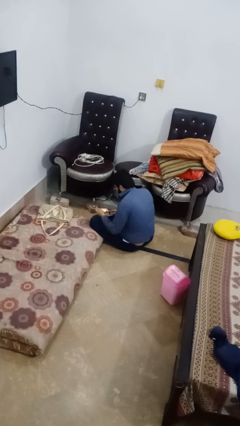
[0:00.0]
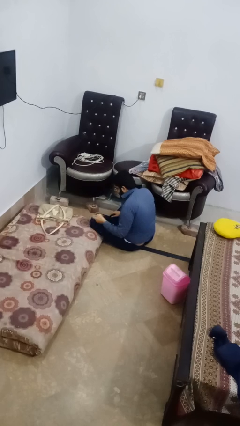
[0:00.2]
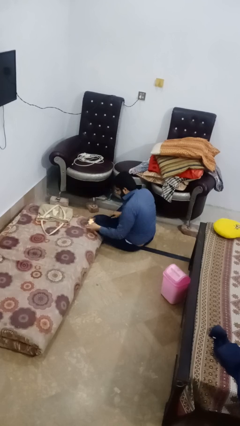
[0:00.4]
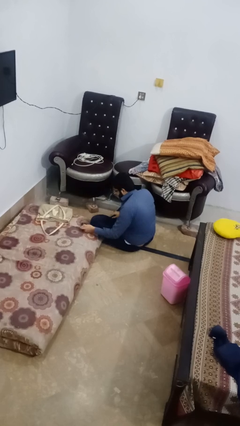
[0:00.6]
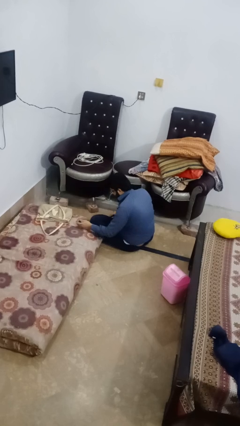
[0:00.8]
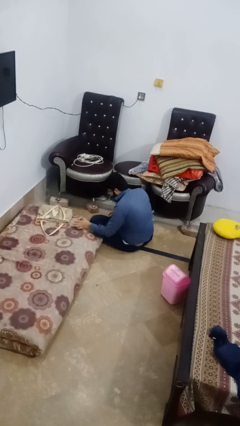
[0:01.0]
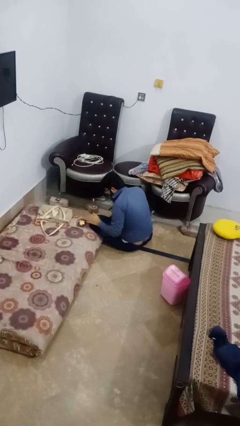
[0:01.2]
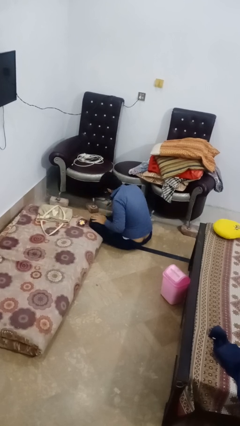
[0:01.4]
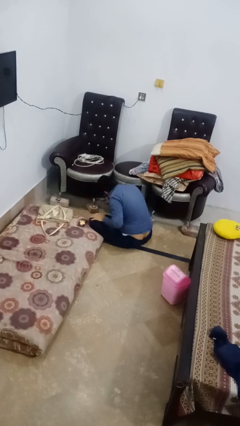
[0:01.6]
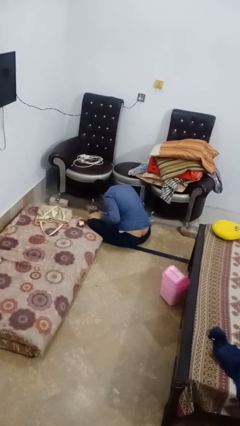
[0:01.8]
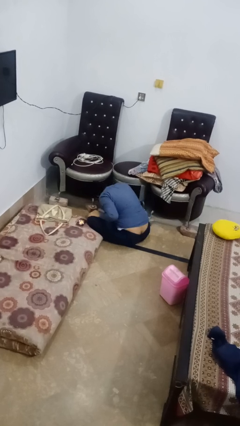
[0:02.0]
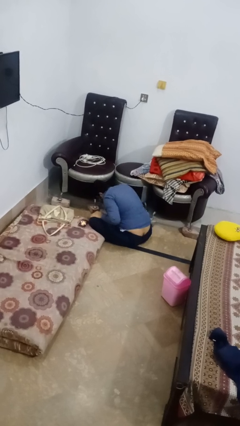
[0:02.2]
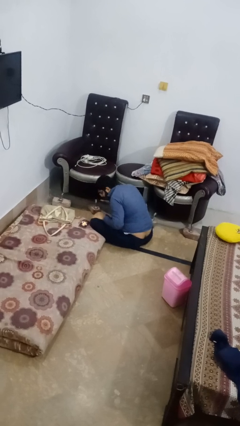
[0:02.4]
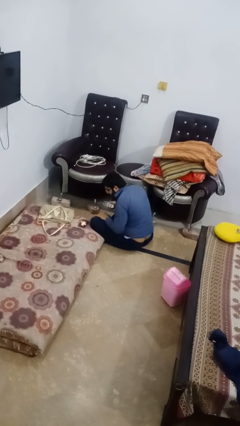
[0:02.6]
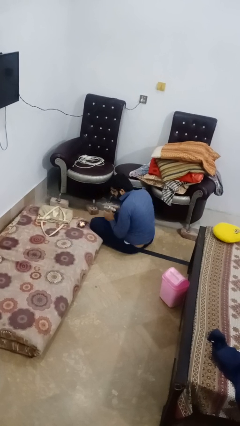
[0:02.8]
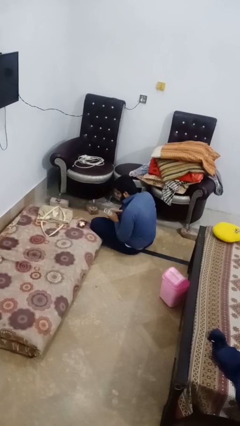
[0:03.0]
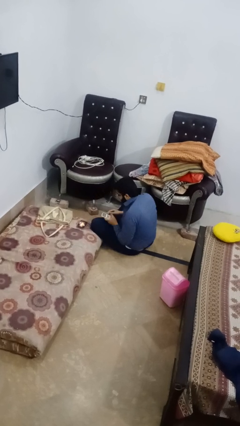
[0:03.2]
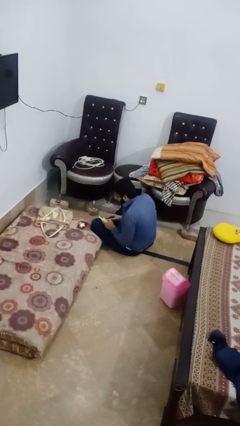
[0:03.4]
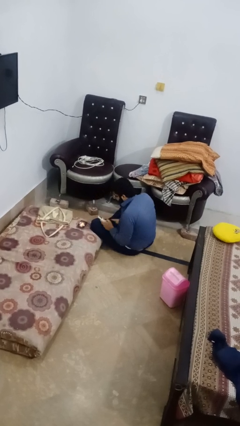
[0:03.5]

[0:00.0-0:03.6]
person searches under couch

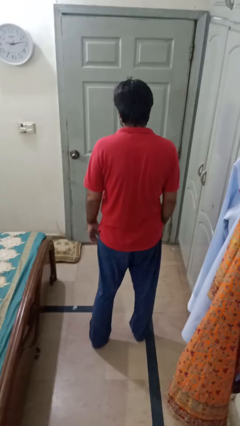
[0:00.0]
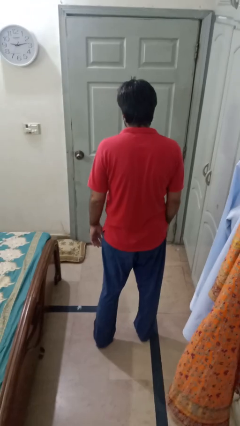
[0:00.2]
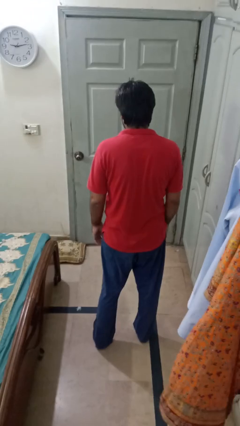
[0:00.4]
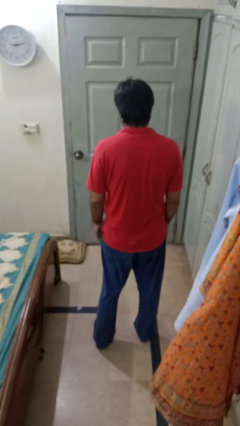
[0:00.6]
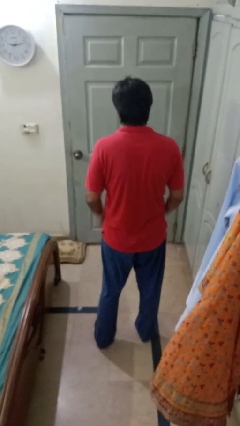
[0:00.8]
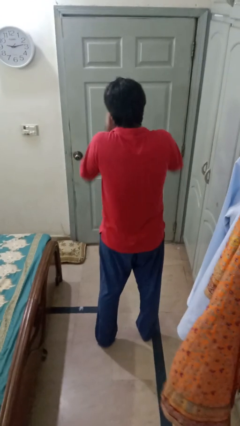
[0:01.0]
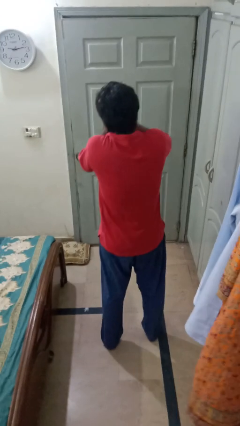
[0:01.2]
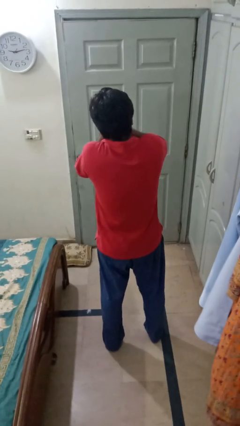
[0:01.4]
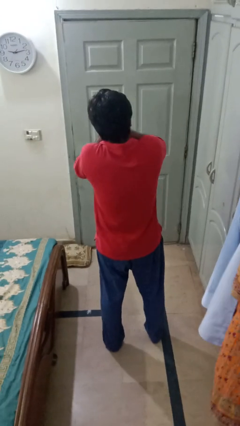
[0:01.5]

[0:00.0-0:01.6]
person covers face with hands

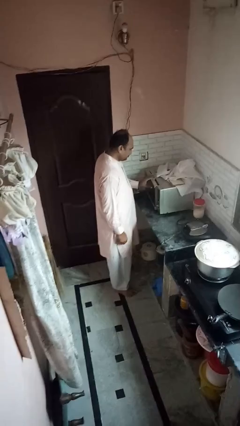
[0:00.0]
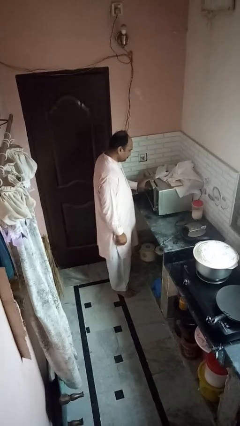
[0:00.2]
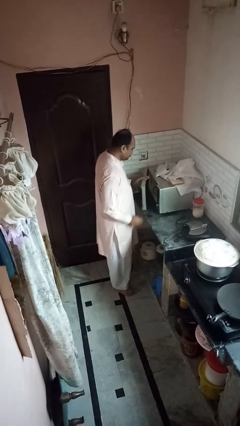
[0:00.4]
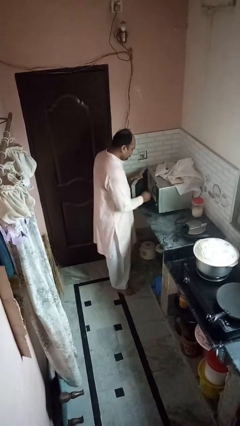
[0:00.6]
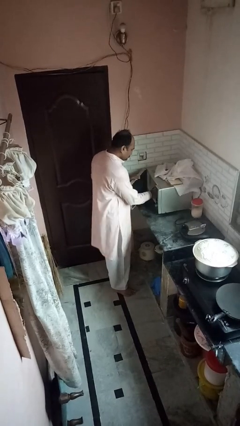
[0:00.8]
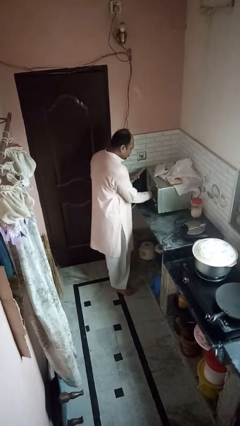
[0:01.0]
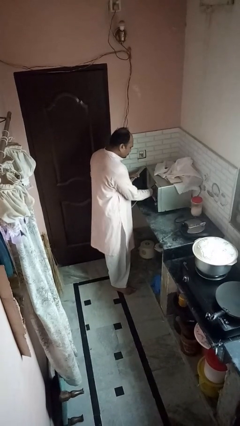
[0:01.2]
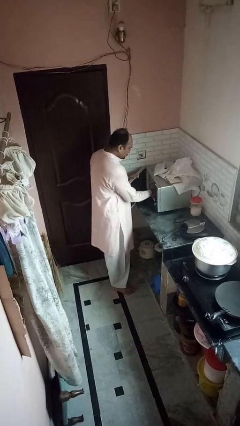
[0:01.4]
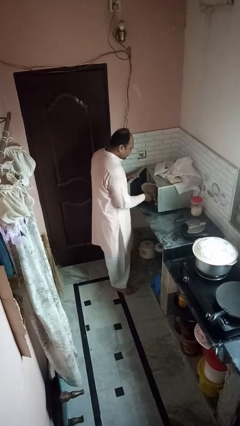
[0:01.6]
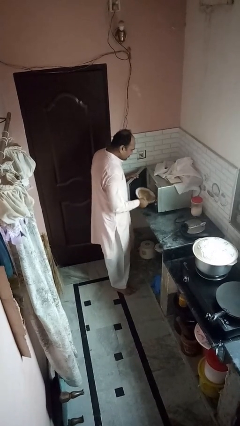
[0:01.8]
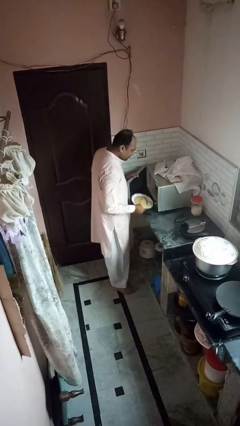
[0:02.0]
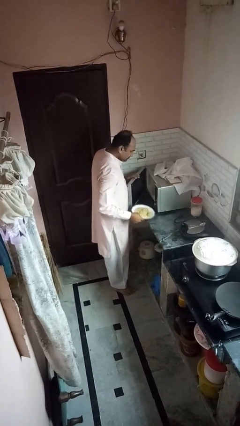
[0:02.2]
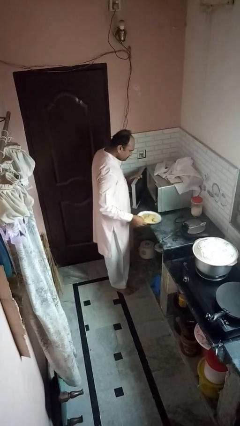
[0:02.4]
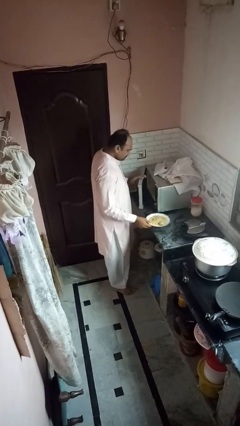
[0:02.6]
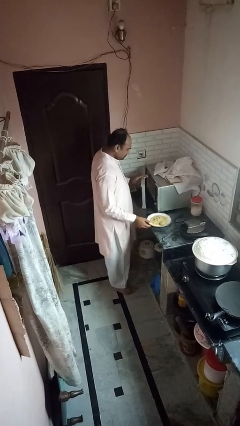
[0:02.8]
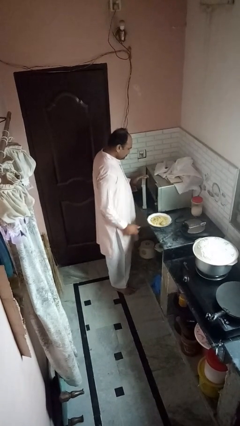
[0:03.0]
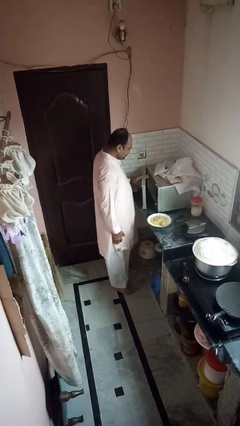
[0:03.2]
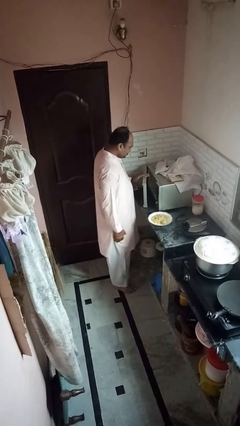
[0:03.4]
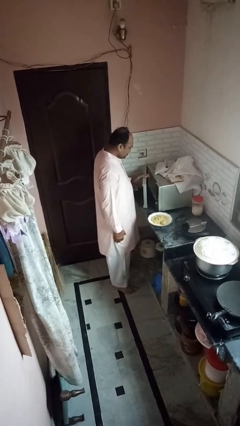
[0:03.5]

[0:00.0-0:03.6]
person takes object from oven

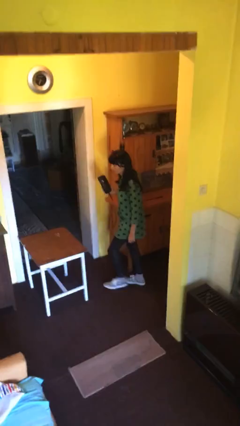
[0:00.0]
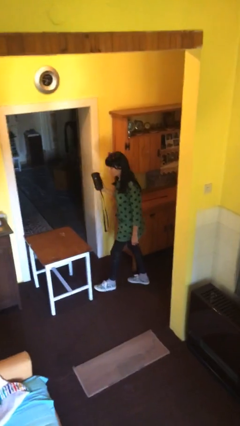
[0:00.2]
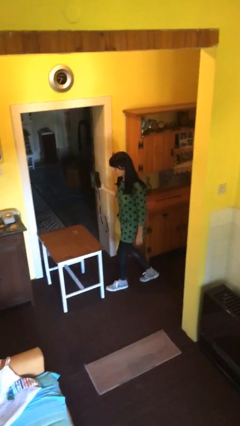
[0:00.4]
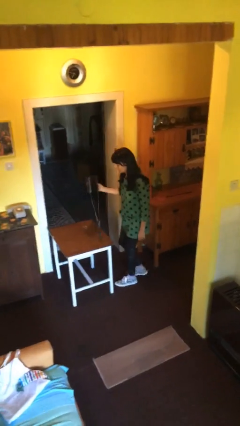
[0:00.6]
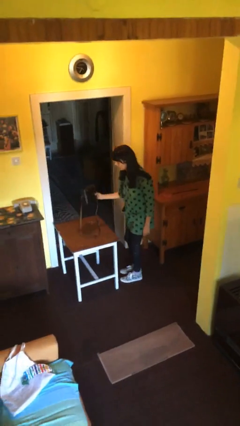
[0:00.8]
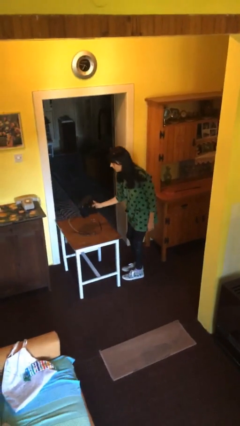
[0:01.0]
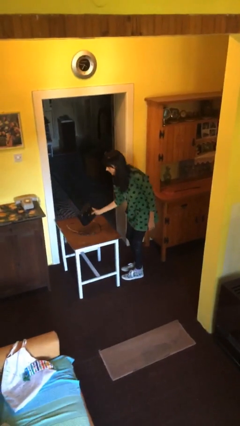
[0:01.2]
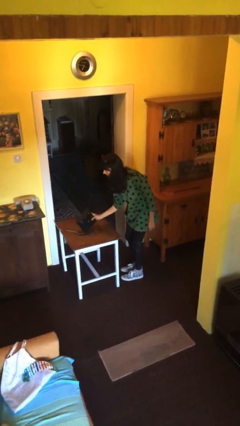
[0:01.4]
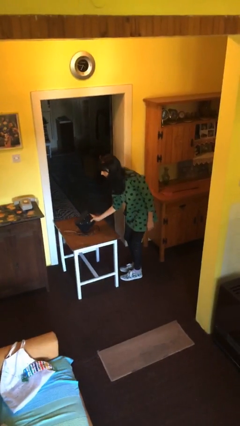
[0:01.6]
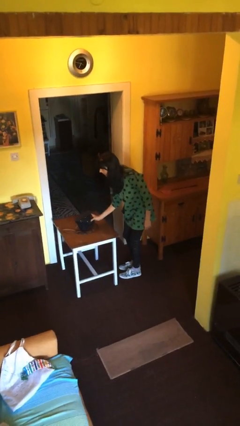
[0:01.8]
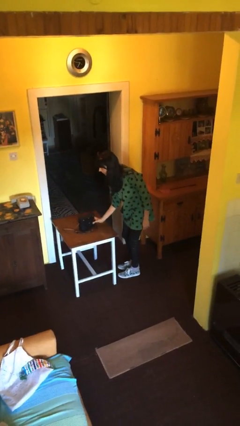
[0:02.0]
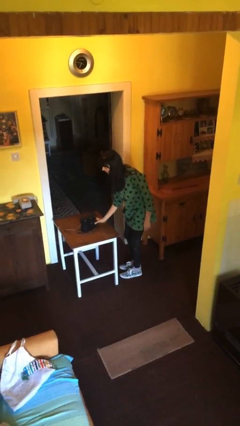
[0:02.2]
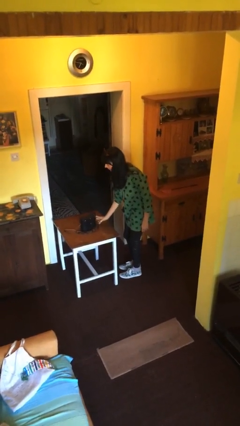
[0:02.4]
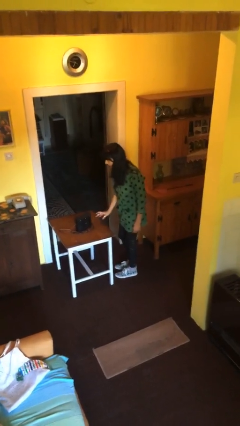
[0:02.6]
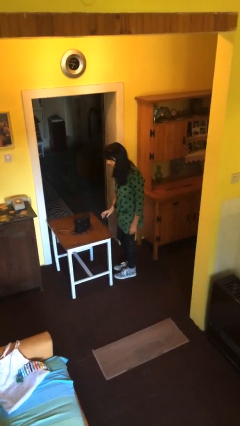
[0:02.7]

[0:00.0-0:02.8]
person puts down object on table

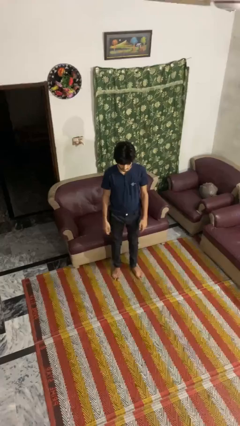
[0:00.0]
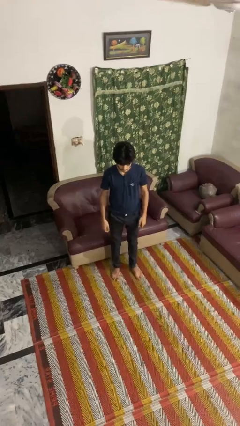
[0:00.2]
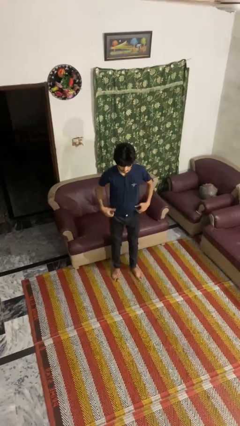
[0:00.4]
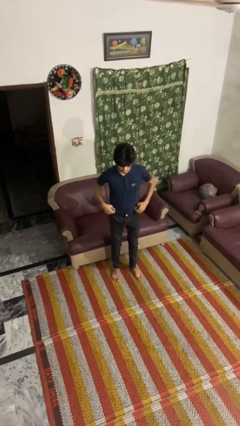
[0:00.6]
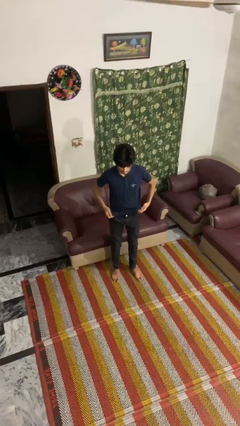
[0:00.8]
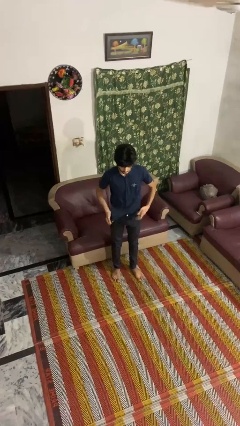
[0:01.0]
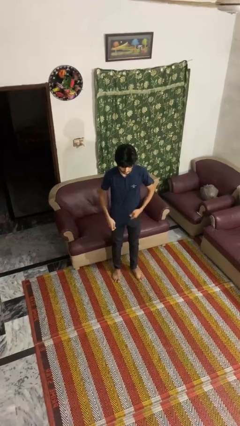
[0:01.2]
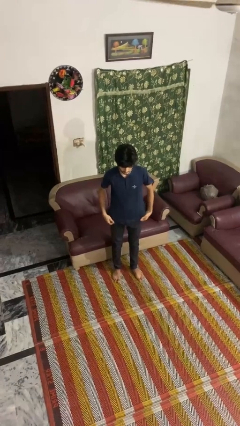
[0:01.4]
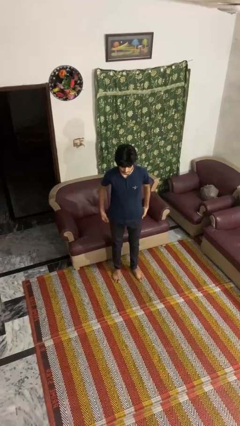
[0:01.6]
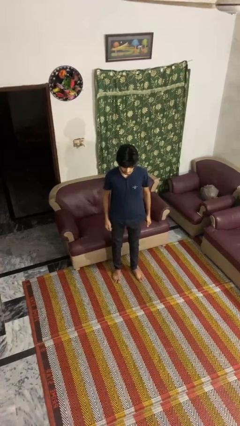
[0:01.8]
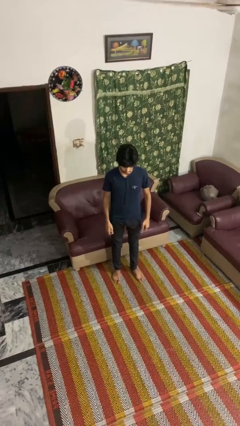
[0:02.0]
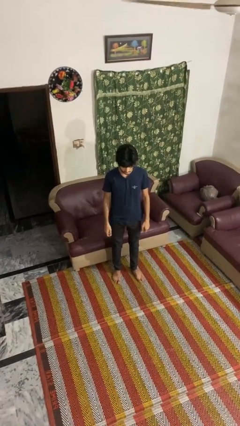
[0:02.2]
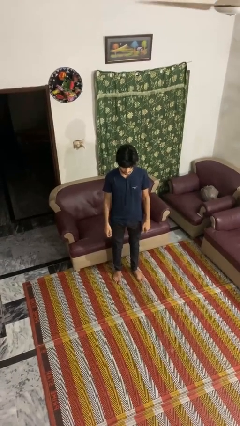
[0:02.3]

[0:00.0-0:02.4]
person untucks shirt

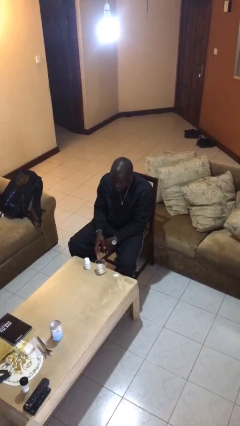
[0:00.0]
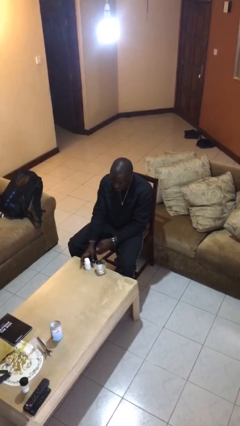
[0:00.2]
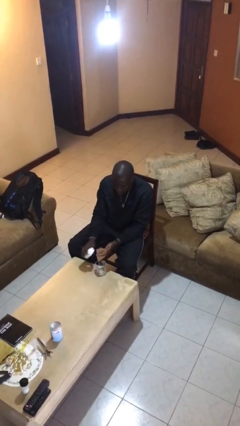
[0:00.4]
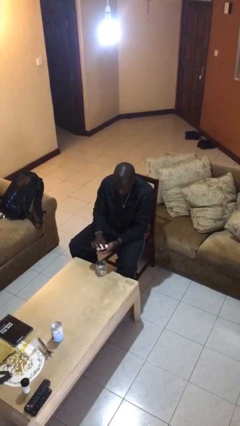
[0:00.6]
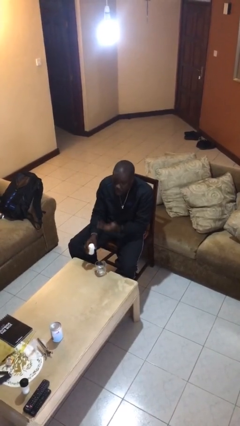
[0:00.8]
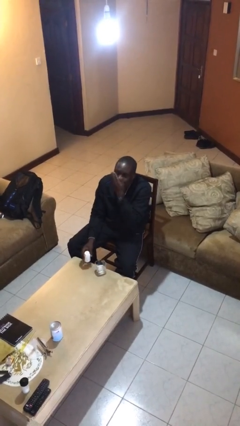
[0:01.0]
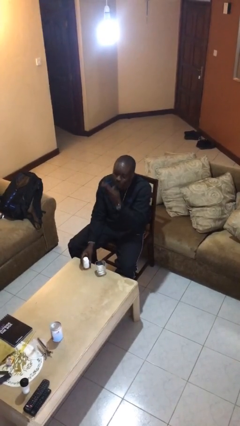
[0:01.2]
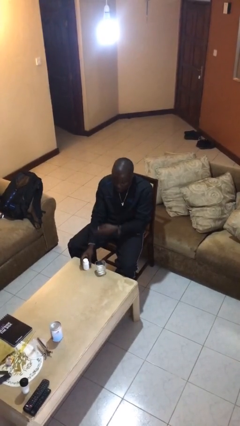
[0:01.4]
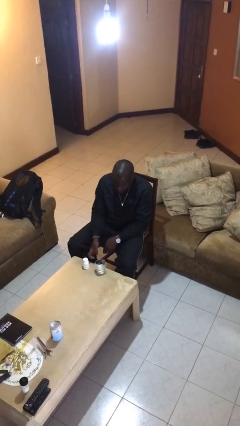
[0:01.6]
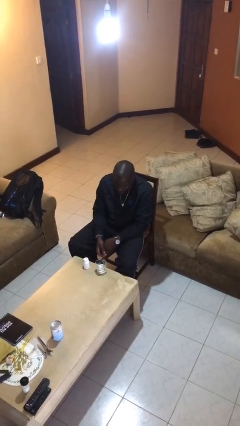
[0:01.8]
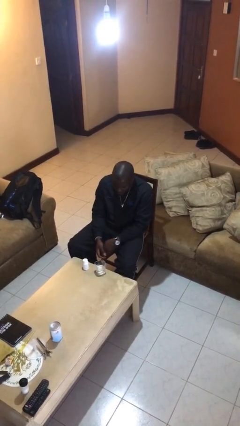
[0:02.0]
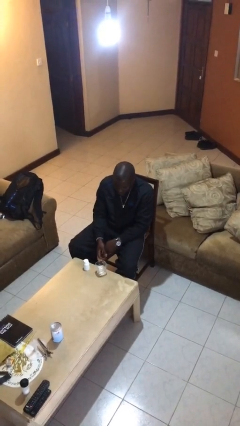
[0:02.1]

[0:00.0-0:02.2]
person takes medicine pills

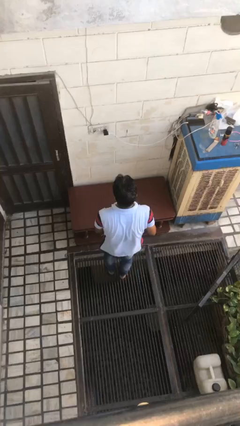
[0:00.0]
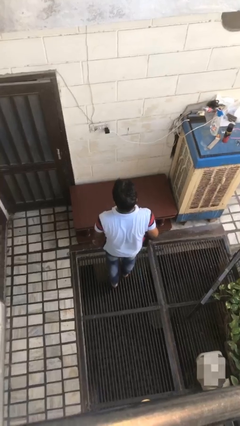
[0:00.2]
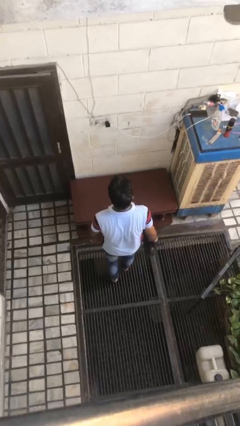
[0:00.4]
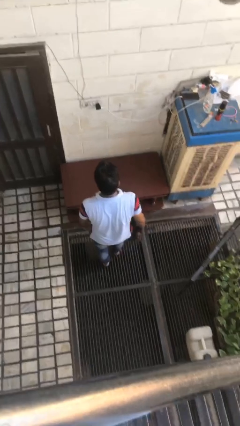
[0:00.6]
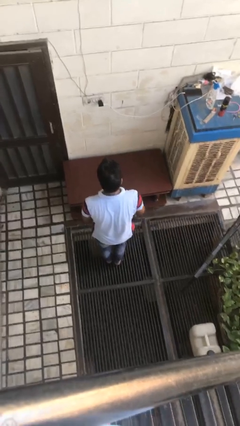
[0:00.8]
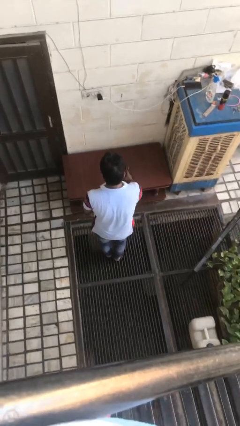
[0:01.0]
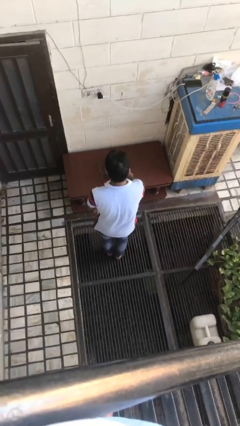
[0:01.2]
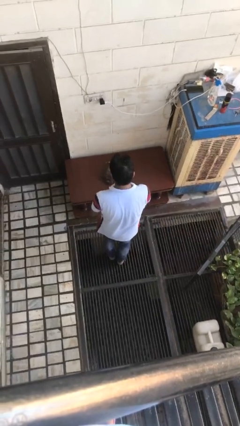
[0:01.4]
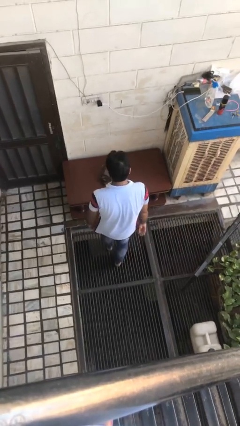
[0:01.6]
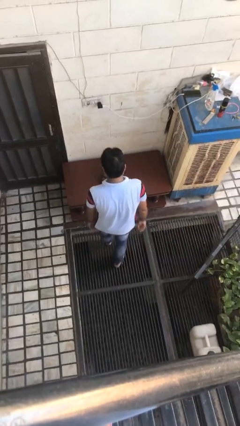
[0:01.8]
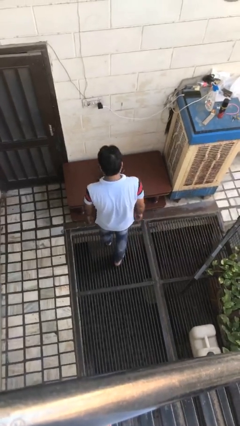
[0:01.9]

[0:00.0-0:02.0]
person throws object on table
